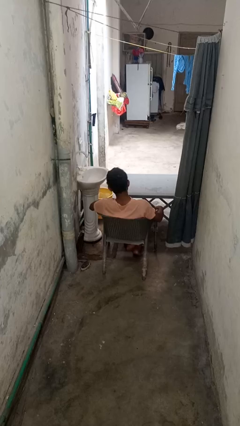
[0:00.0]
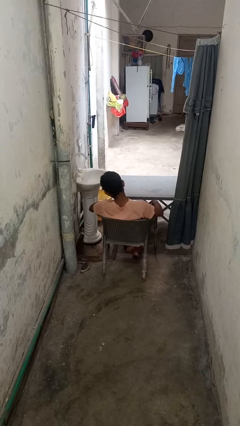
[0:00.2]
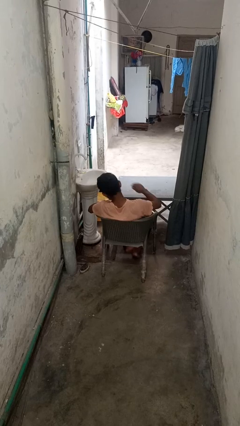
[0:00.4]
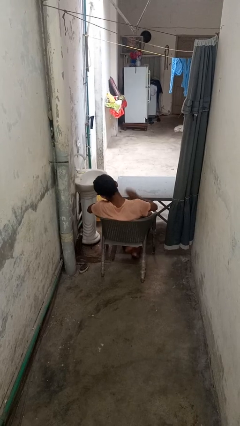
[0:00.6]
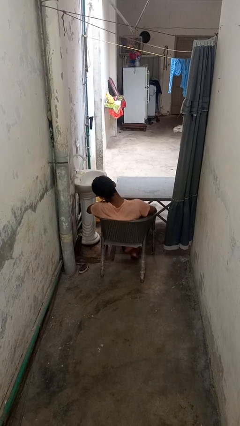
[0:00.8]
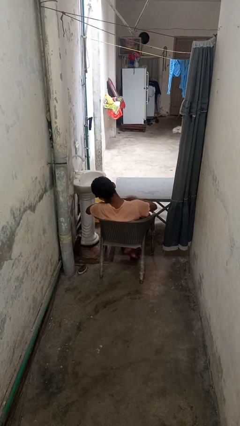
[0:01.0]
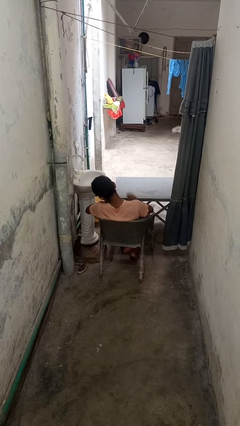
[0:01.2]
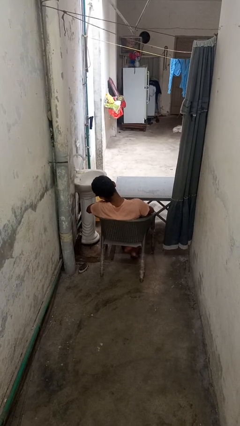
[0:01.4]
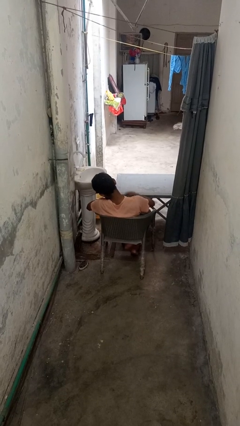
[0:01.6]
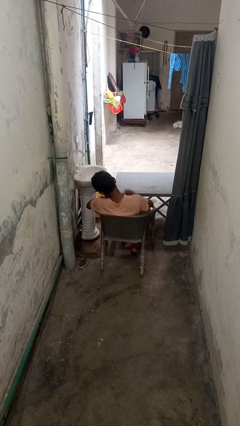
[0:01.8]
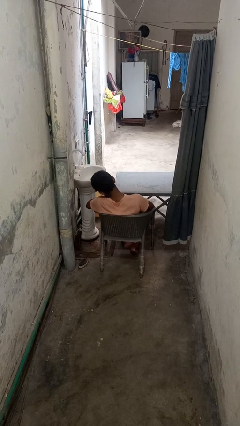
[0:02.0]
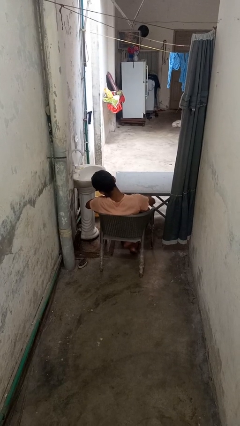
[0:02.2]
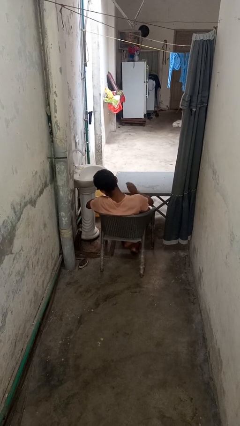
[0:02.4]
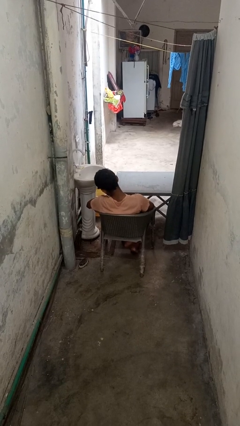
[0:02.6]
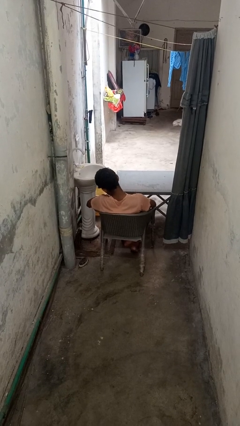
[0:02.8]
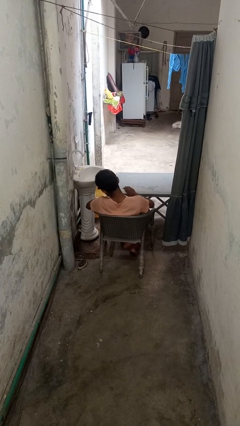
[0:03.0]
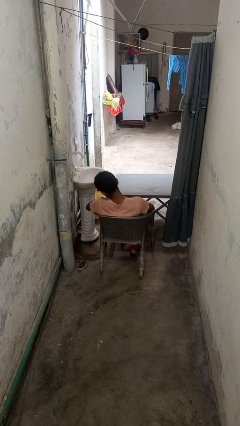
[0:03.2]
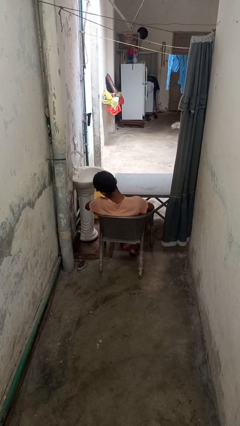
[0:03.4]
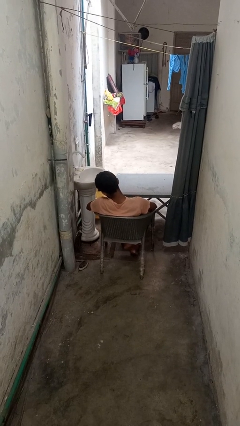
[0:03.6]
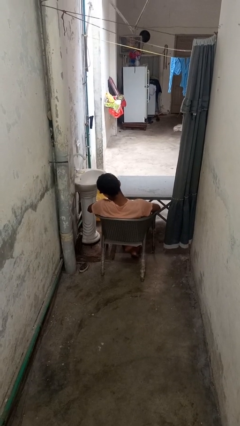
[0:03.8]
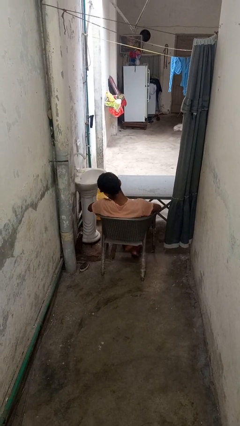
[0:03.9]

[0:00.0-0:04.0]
person slaps hands on thighs

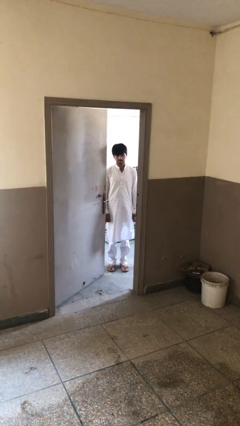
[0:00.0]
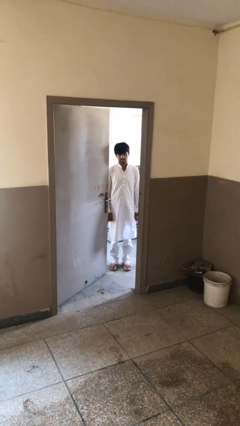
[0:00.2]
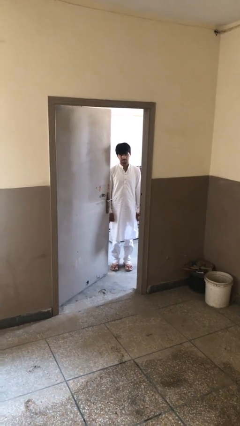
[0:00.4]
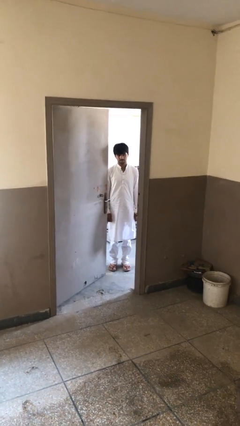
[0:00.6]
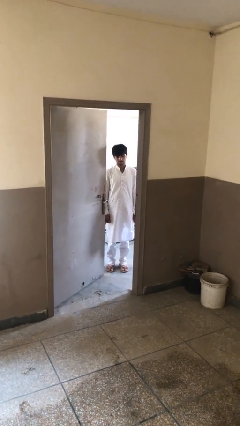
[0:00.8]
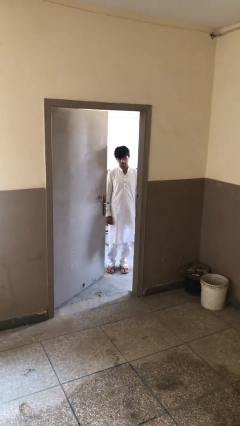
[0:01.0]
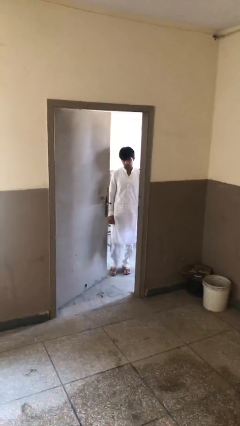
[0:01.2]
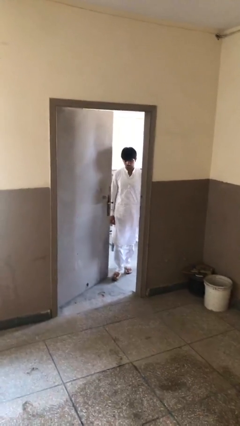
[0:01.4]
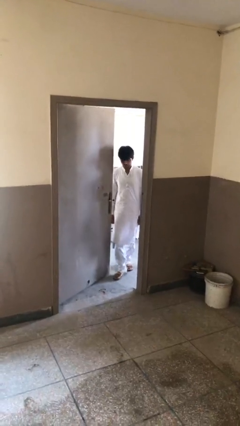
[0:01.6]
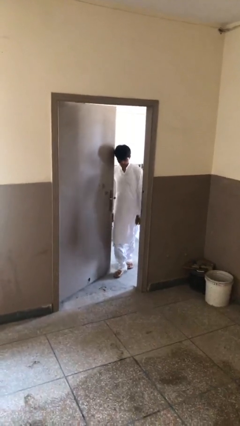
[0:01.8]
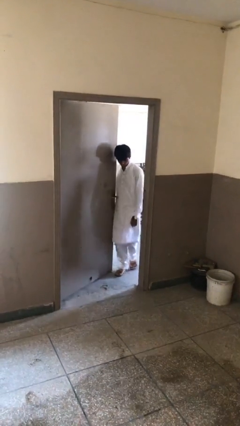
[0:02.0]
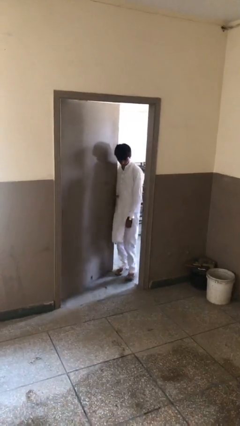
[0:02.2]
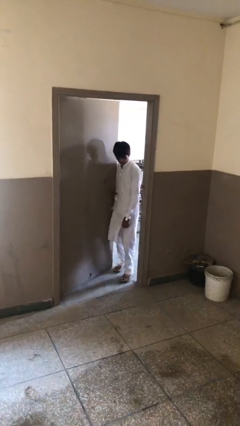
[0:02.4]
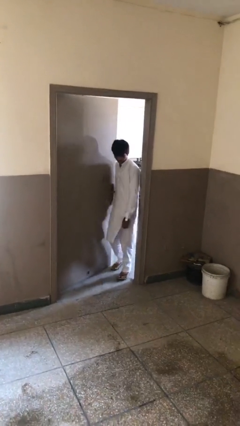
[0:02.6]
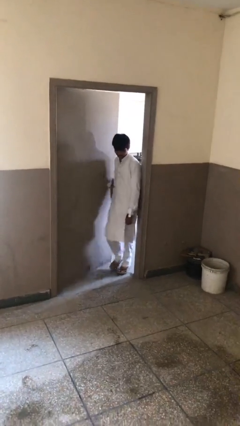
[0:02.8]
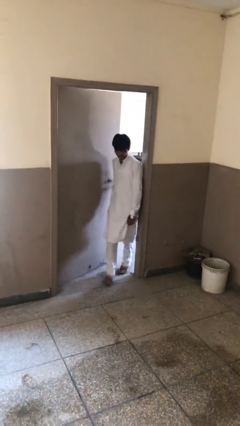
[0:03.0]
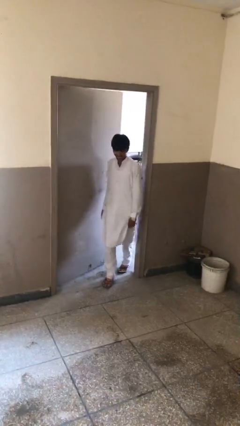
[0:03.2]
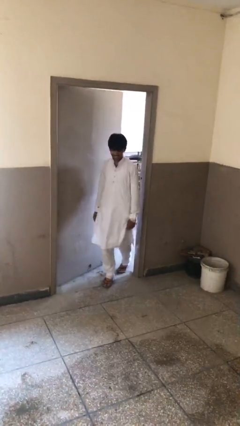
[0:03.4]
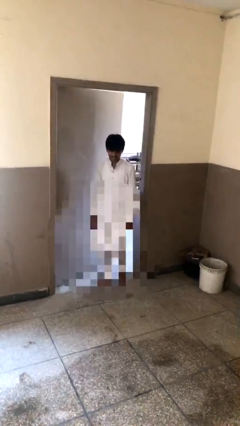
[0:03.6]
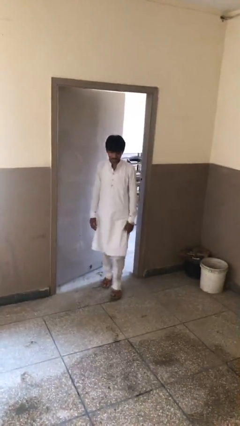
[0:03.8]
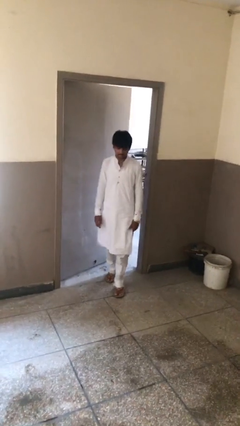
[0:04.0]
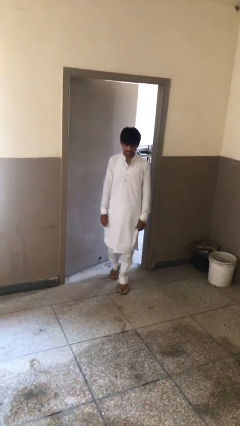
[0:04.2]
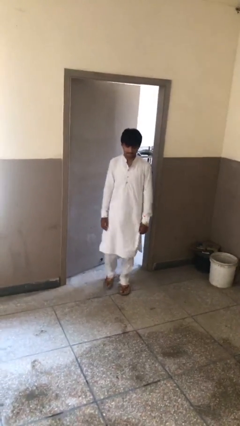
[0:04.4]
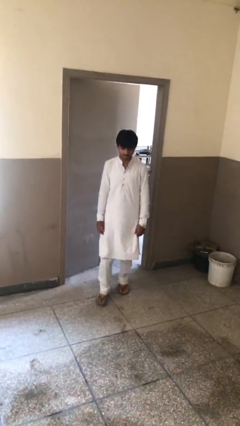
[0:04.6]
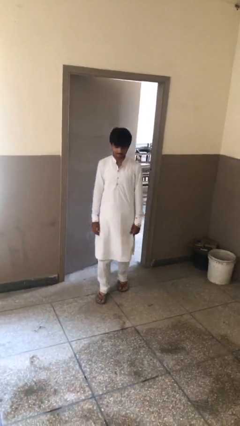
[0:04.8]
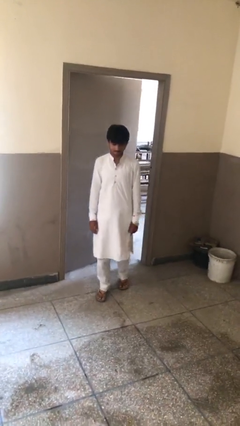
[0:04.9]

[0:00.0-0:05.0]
person enters scene through structure

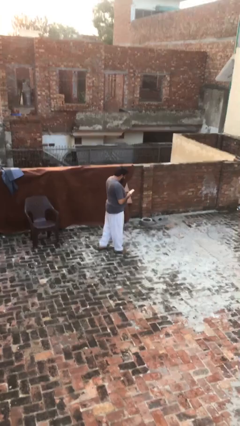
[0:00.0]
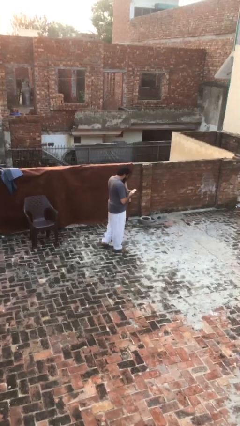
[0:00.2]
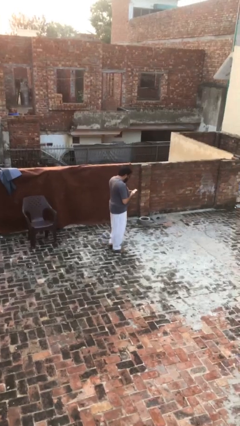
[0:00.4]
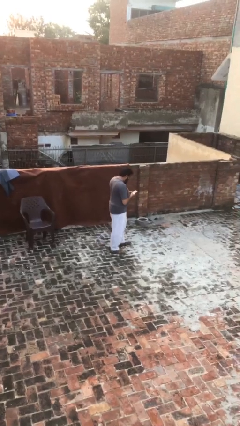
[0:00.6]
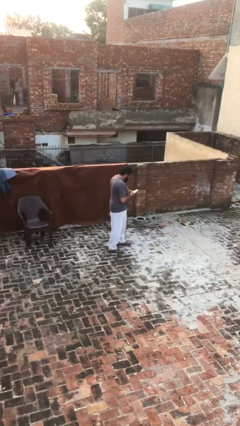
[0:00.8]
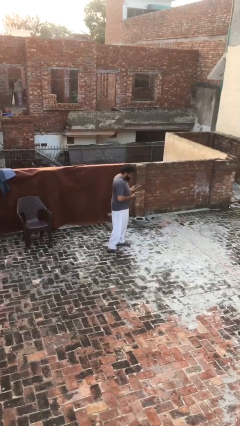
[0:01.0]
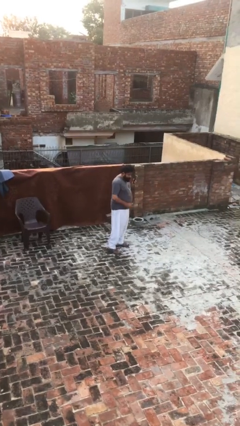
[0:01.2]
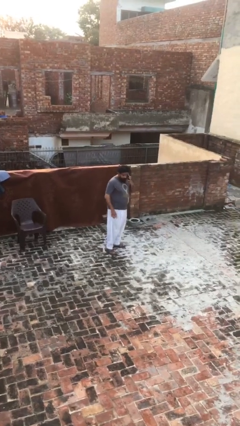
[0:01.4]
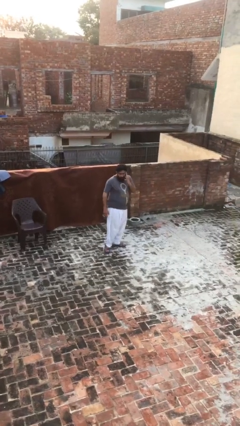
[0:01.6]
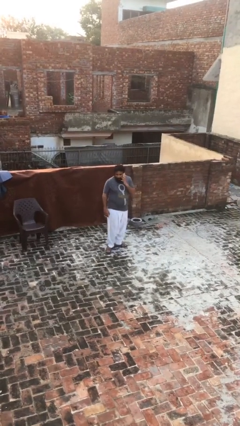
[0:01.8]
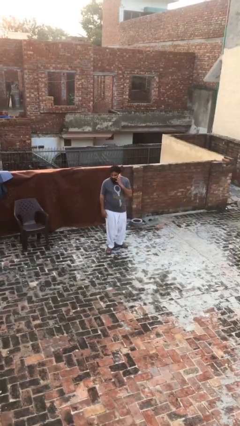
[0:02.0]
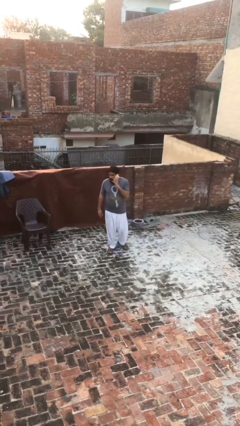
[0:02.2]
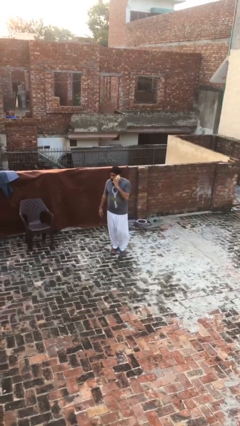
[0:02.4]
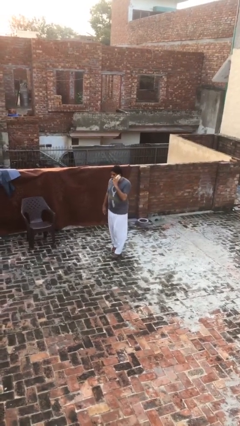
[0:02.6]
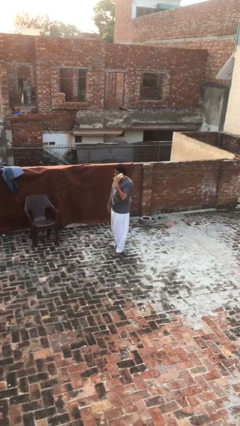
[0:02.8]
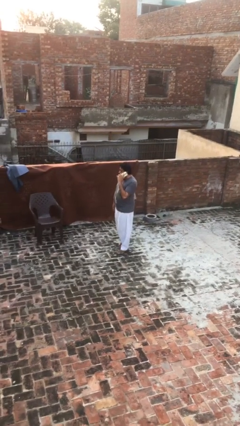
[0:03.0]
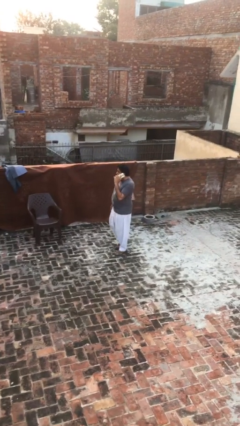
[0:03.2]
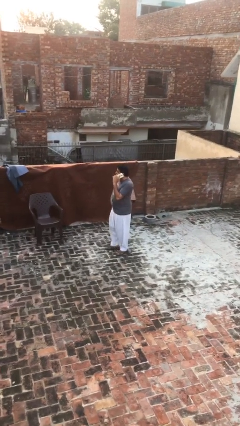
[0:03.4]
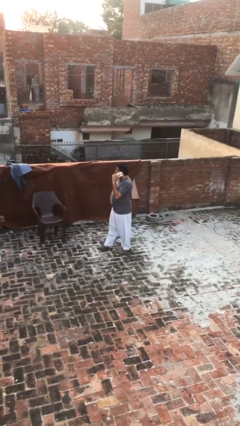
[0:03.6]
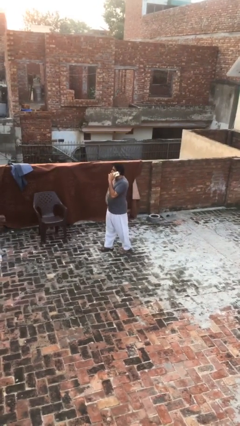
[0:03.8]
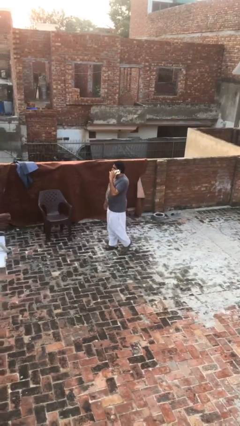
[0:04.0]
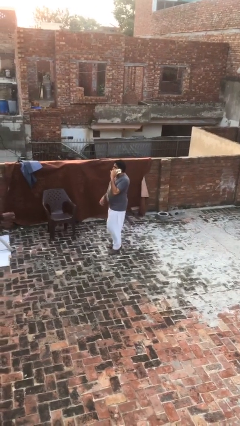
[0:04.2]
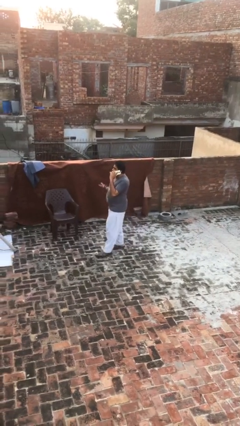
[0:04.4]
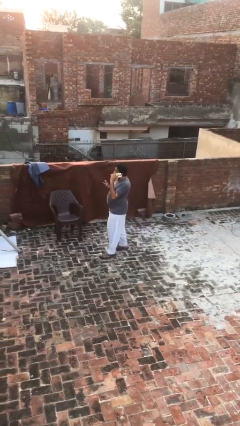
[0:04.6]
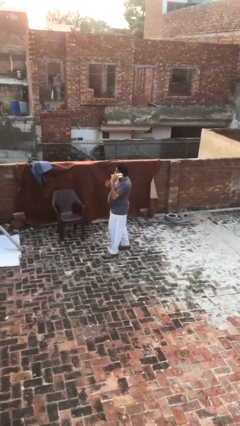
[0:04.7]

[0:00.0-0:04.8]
person talks on phone

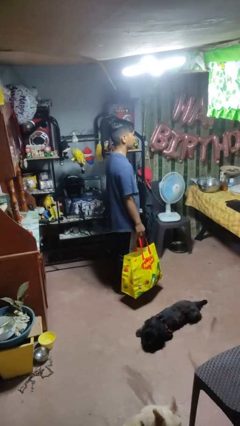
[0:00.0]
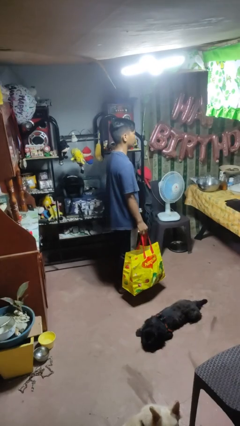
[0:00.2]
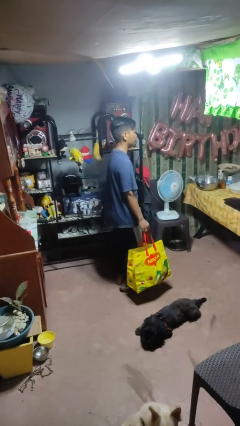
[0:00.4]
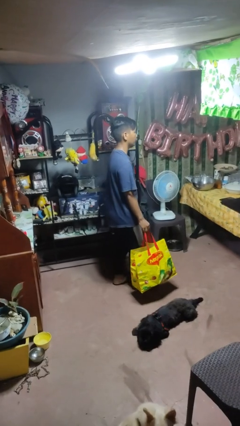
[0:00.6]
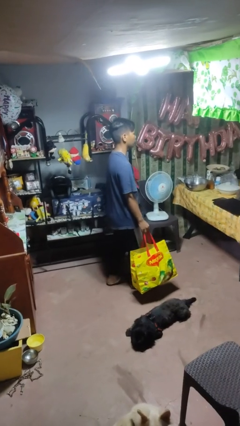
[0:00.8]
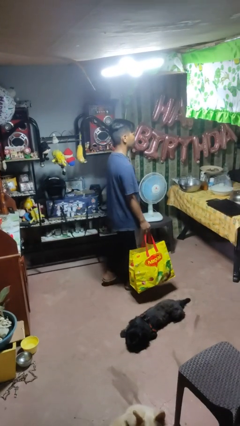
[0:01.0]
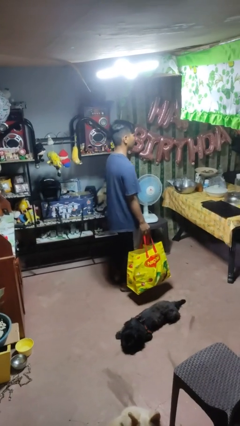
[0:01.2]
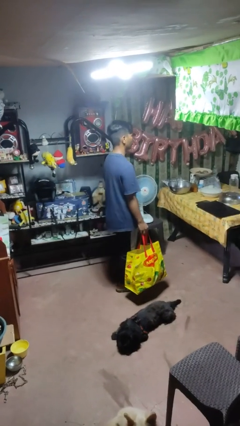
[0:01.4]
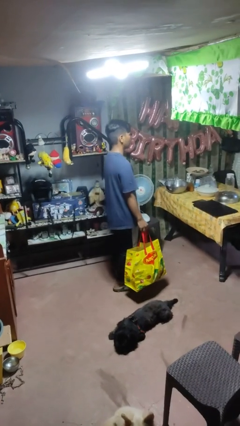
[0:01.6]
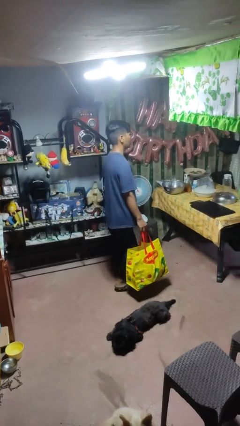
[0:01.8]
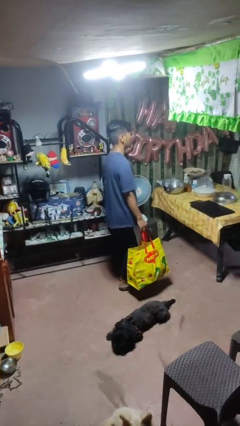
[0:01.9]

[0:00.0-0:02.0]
person carries groceries

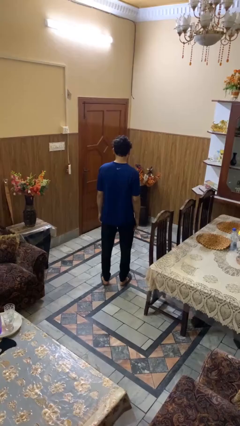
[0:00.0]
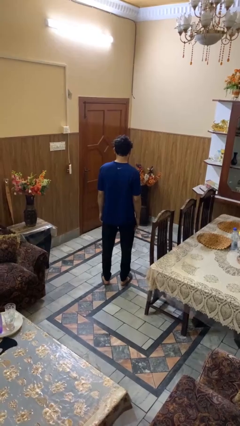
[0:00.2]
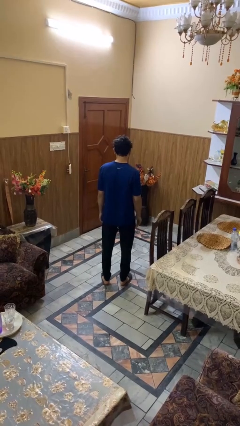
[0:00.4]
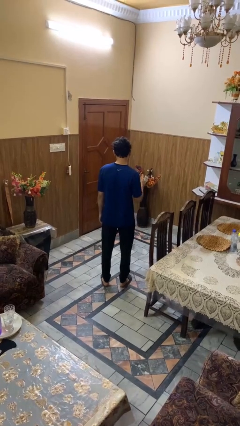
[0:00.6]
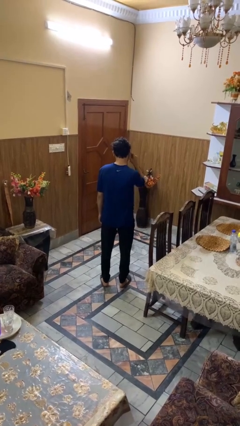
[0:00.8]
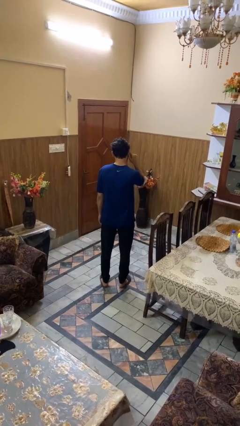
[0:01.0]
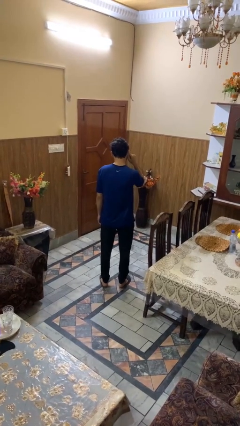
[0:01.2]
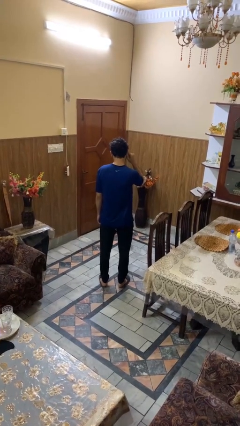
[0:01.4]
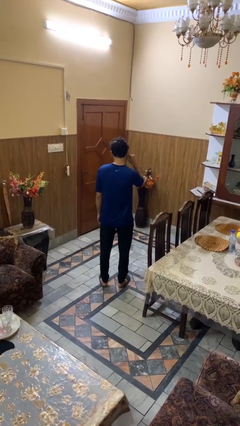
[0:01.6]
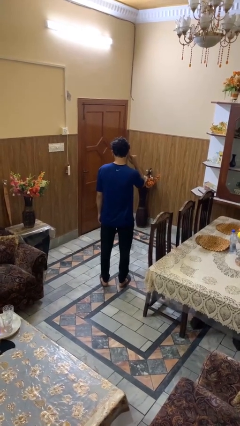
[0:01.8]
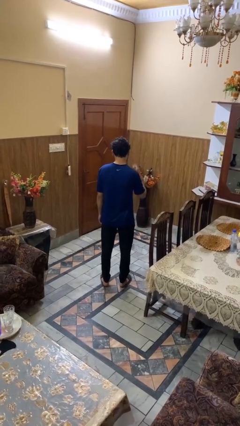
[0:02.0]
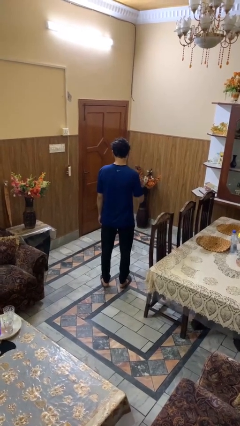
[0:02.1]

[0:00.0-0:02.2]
person touches earlobe
